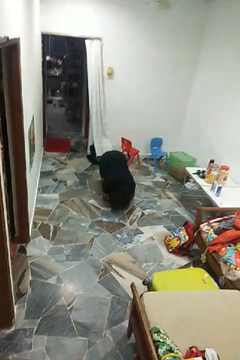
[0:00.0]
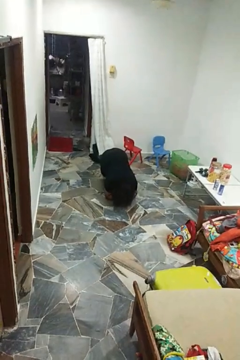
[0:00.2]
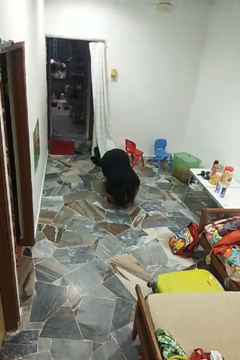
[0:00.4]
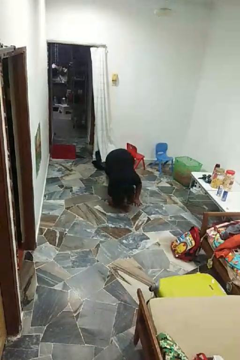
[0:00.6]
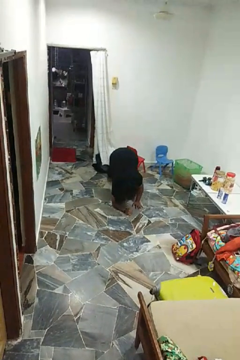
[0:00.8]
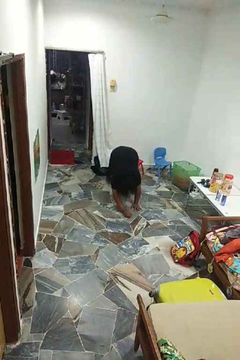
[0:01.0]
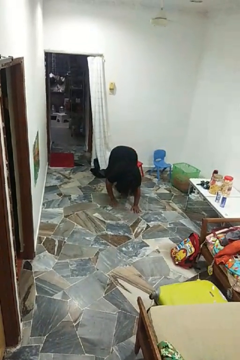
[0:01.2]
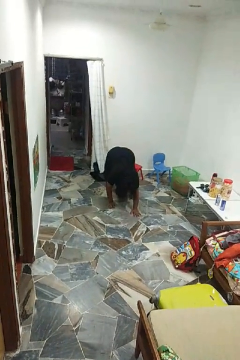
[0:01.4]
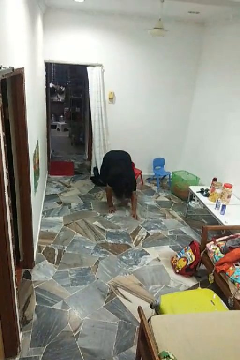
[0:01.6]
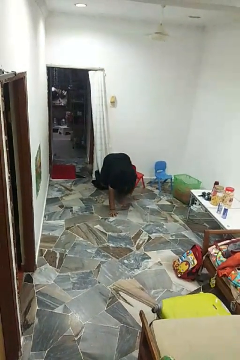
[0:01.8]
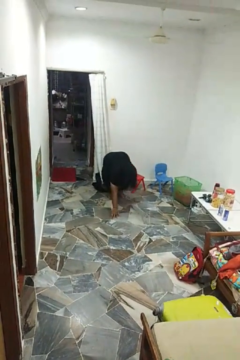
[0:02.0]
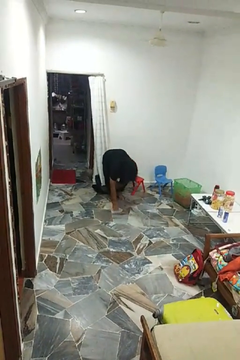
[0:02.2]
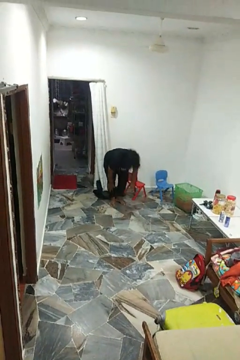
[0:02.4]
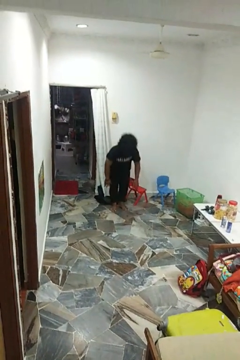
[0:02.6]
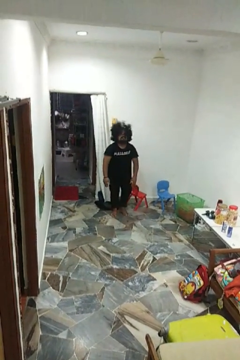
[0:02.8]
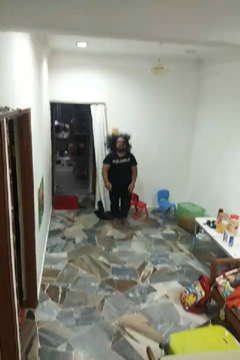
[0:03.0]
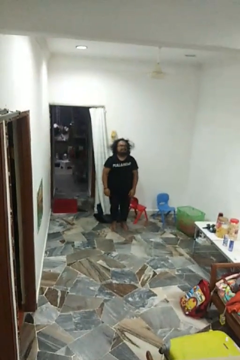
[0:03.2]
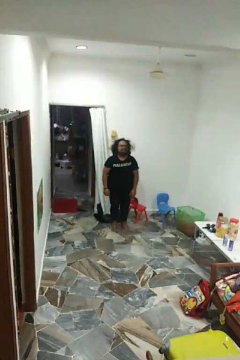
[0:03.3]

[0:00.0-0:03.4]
person stands up from floor

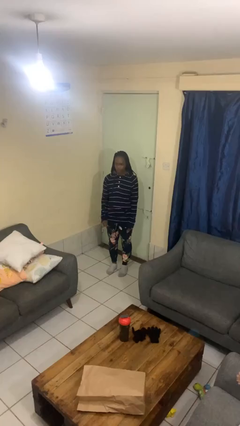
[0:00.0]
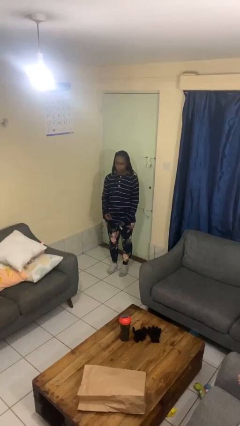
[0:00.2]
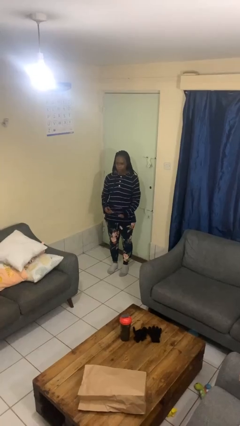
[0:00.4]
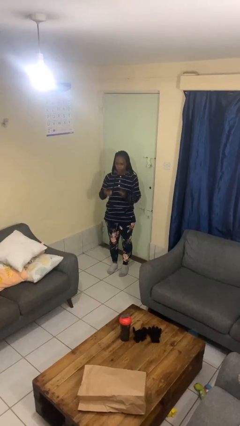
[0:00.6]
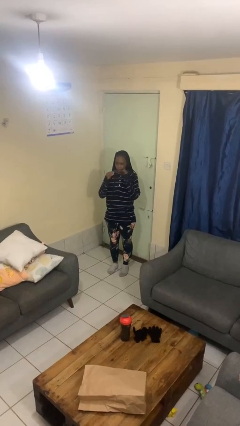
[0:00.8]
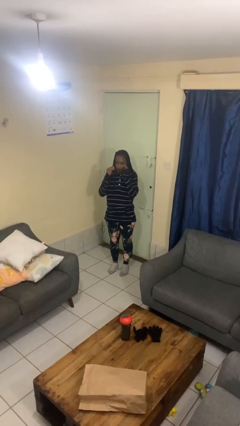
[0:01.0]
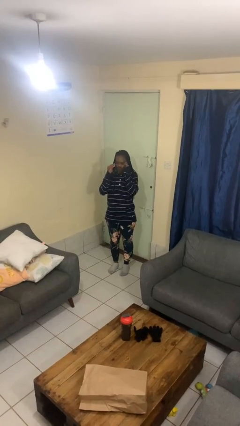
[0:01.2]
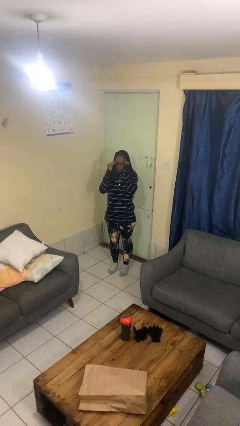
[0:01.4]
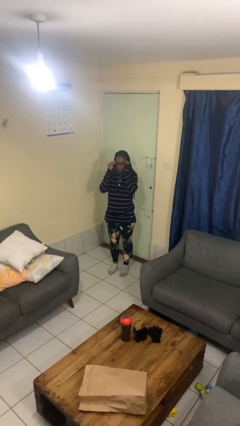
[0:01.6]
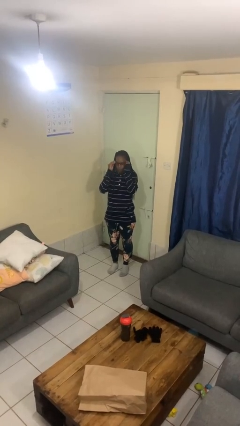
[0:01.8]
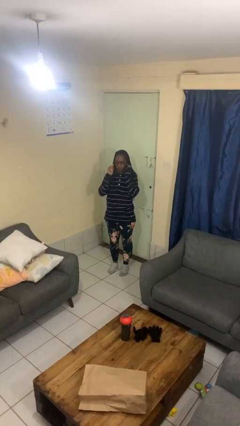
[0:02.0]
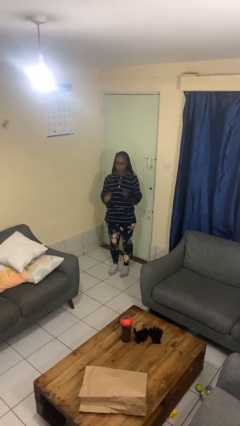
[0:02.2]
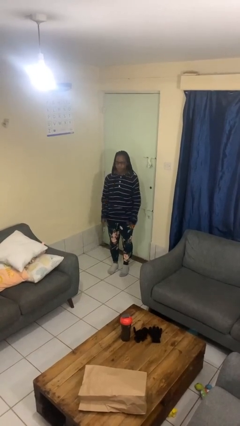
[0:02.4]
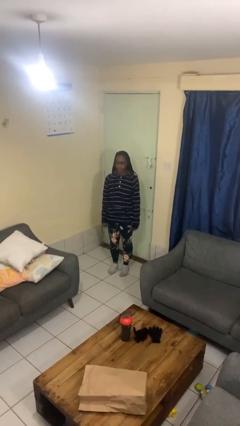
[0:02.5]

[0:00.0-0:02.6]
person puts on glasses

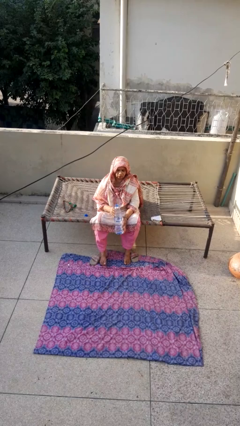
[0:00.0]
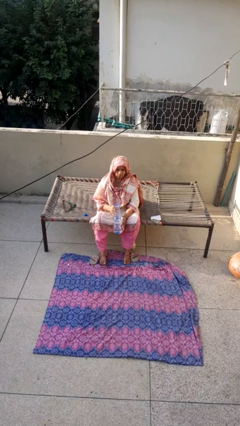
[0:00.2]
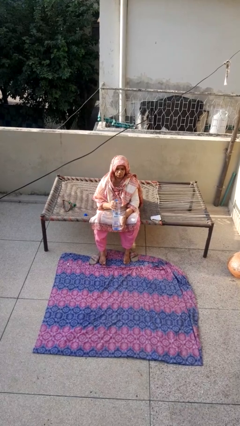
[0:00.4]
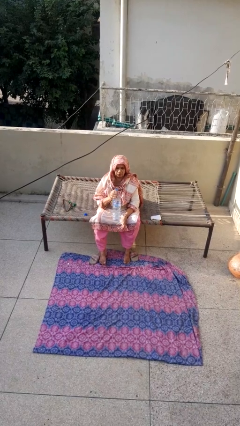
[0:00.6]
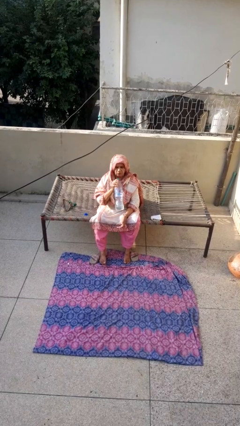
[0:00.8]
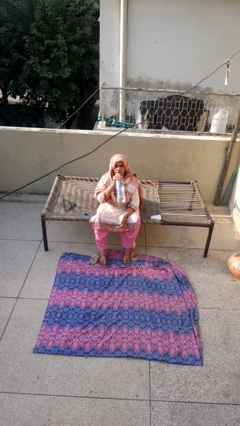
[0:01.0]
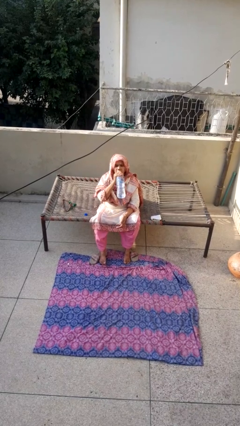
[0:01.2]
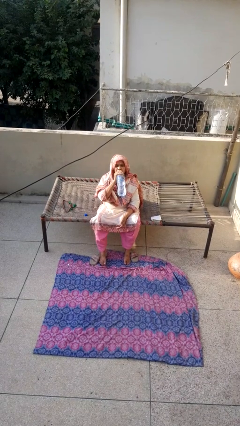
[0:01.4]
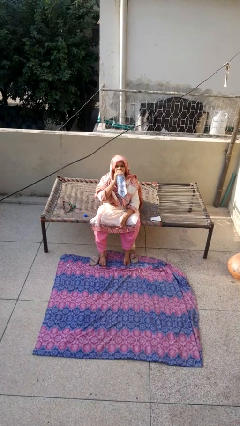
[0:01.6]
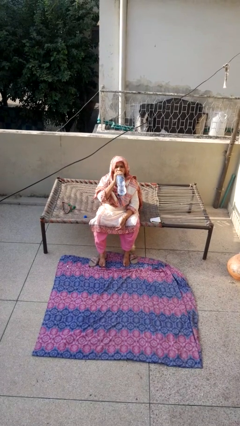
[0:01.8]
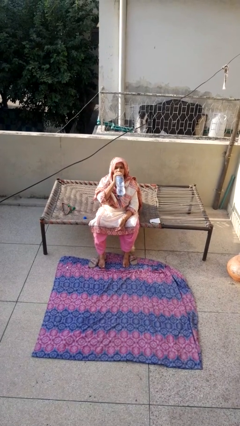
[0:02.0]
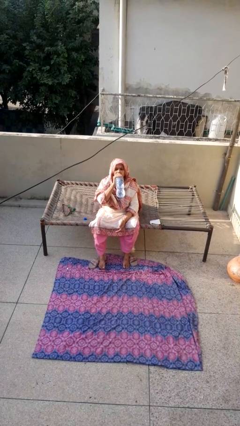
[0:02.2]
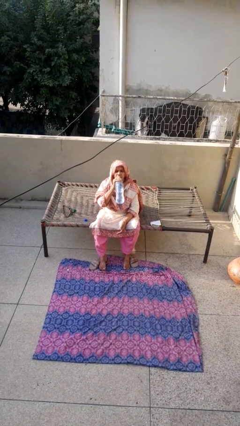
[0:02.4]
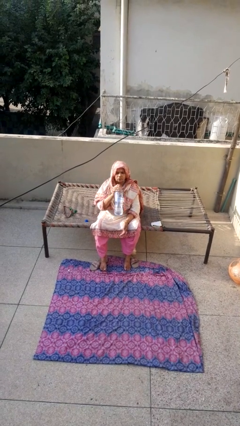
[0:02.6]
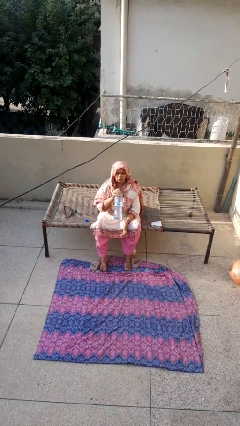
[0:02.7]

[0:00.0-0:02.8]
person drinks from bottle

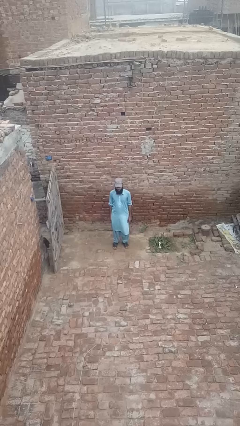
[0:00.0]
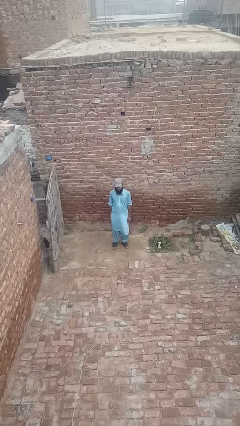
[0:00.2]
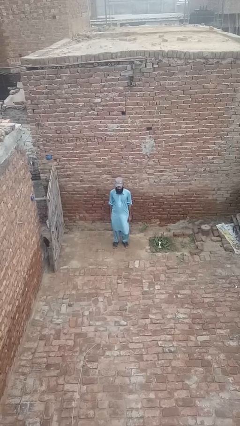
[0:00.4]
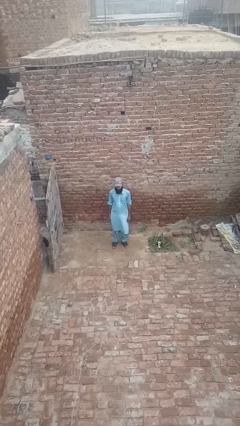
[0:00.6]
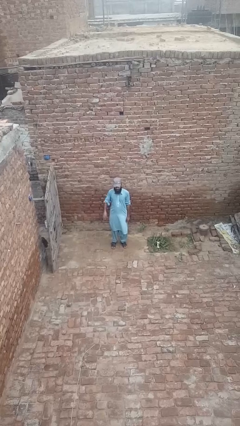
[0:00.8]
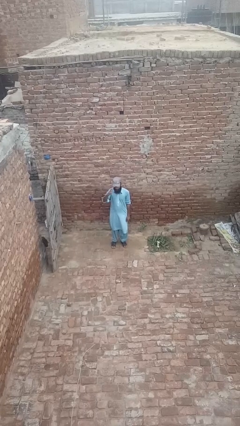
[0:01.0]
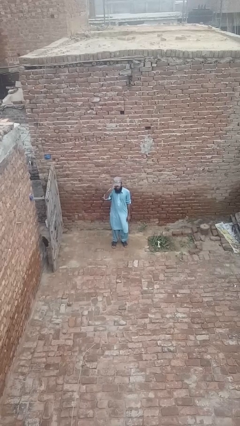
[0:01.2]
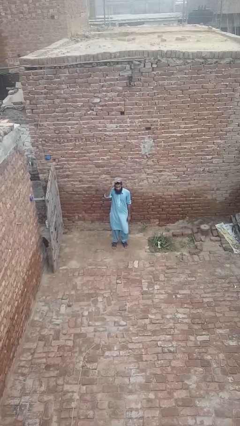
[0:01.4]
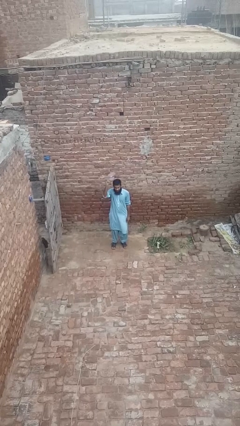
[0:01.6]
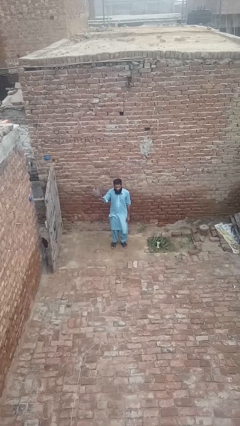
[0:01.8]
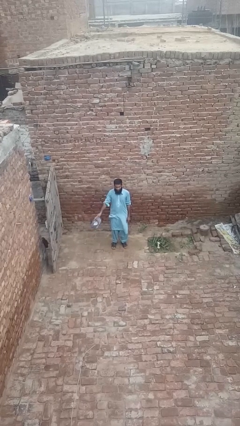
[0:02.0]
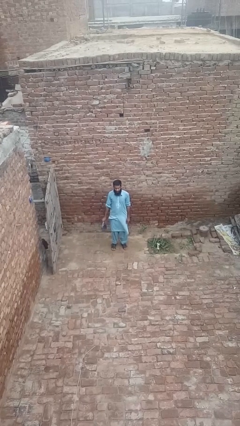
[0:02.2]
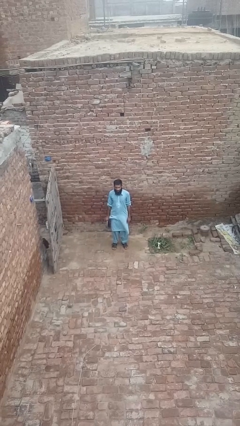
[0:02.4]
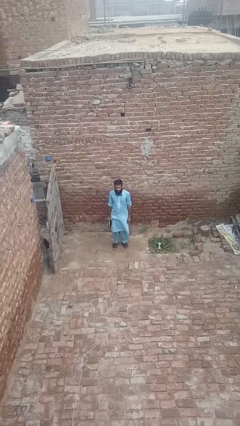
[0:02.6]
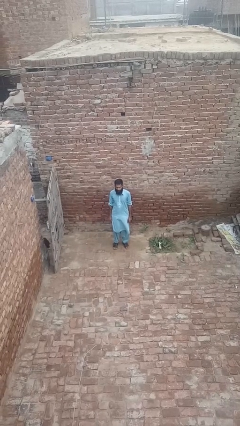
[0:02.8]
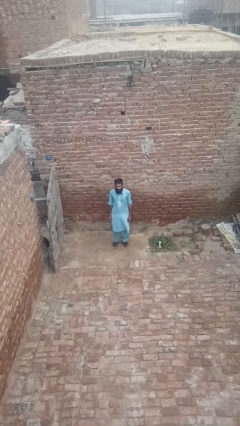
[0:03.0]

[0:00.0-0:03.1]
person takes off hat

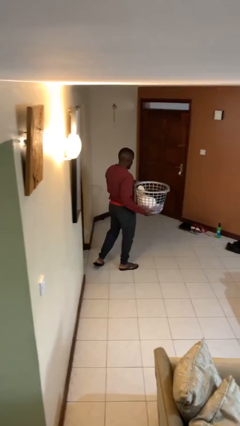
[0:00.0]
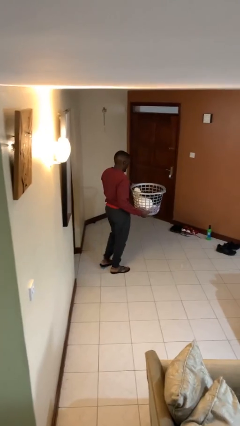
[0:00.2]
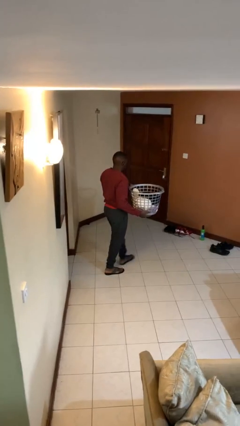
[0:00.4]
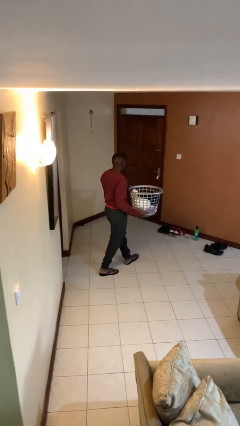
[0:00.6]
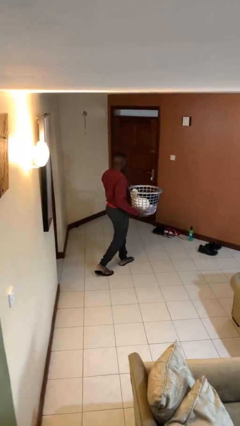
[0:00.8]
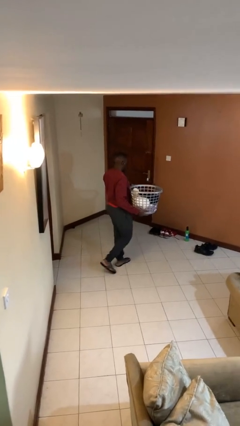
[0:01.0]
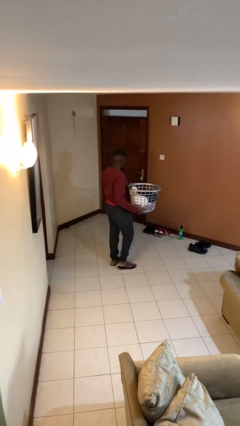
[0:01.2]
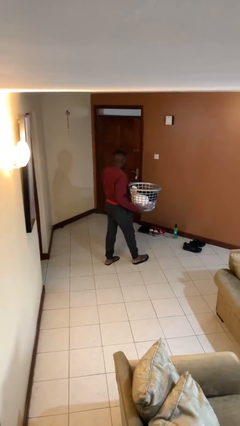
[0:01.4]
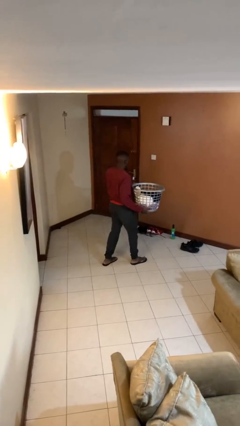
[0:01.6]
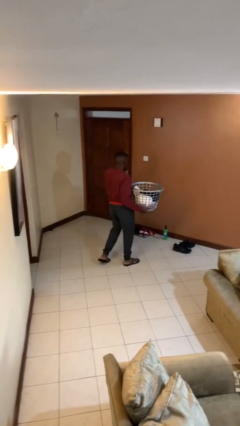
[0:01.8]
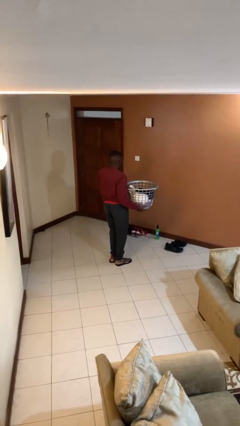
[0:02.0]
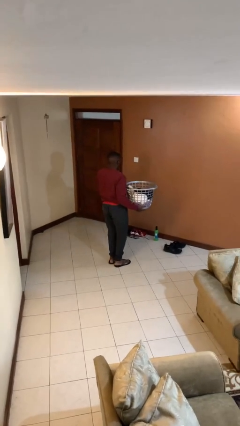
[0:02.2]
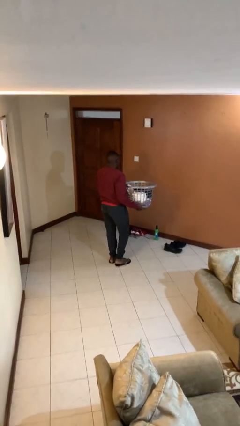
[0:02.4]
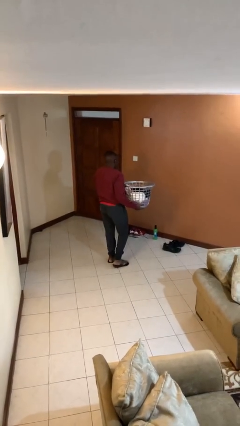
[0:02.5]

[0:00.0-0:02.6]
person carries laundry basket

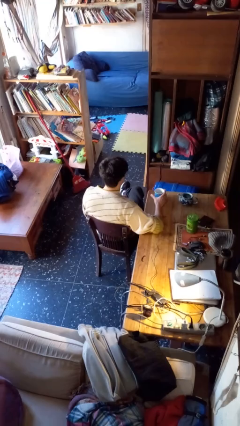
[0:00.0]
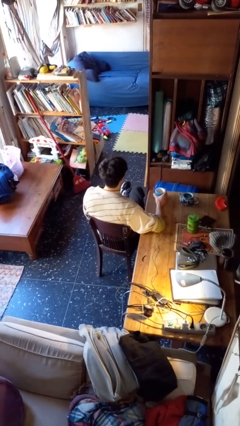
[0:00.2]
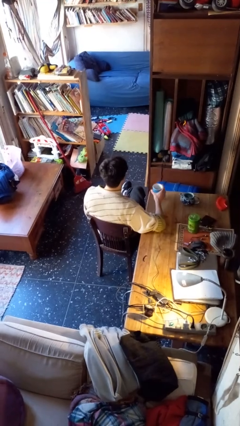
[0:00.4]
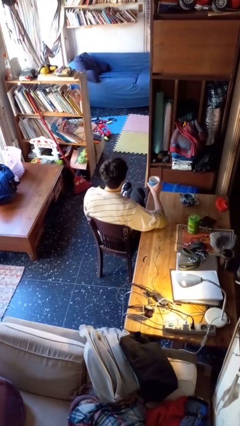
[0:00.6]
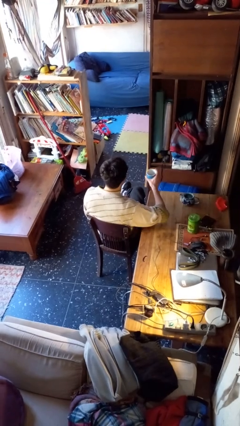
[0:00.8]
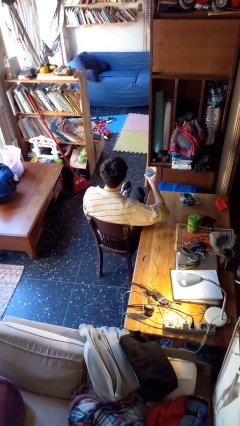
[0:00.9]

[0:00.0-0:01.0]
person picks up object from table

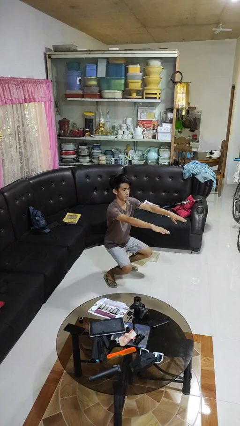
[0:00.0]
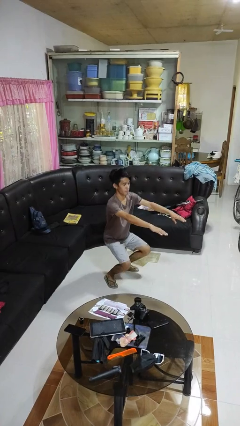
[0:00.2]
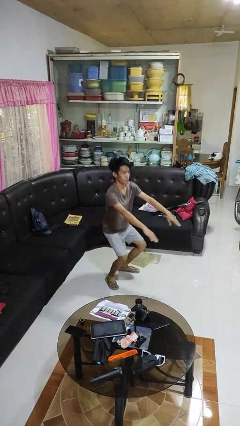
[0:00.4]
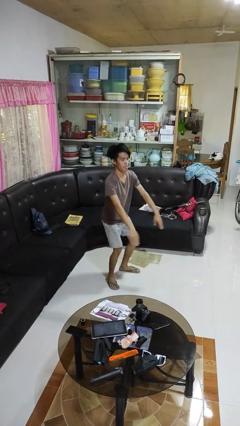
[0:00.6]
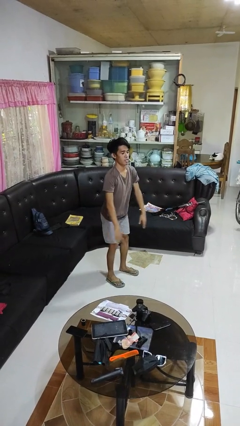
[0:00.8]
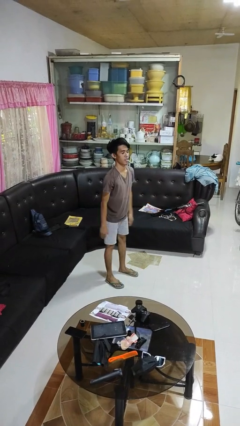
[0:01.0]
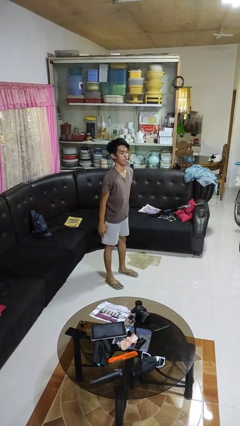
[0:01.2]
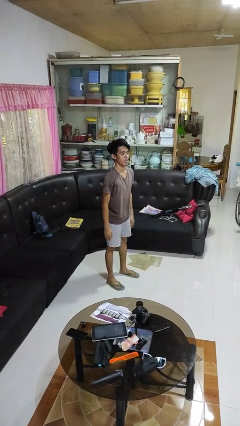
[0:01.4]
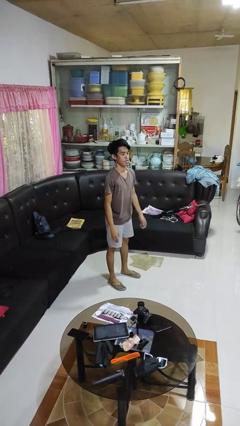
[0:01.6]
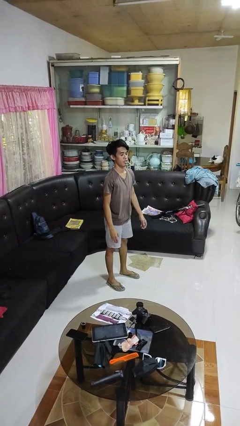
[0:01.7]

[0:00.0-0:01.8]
person stands up
